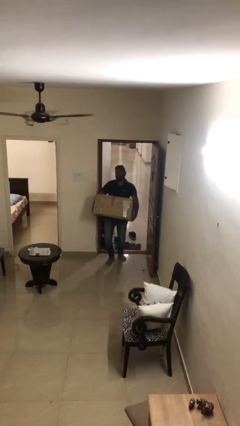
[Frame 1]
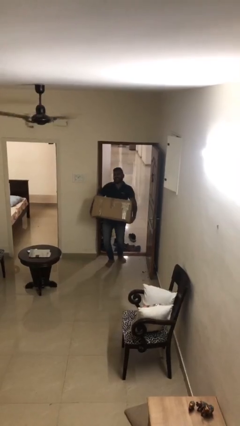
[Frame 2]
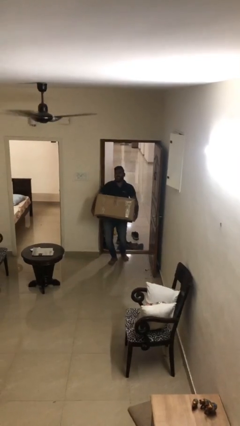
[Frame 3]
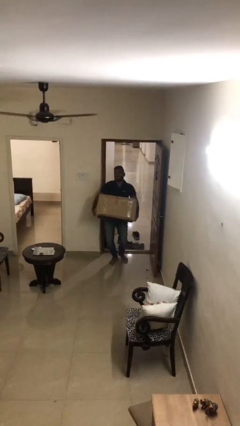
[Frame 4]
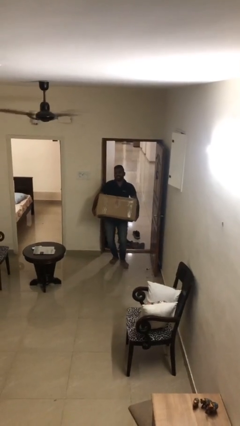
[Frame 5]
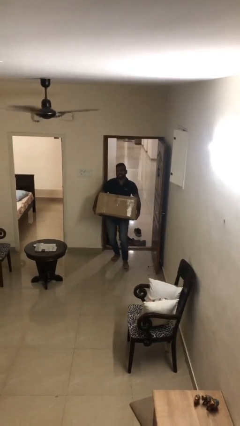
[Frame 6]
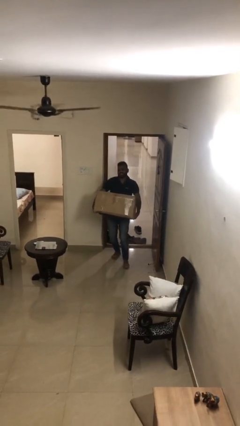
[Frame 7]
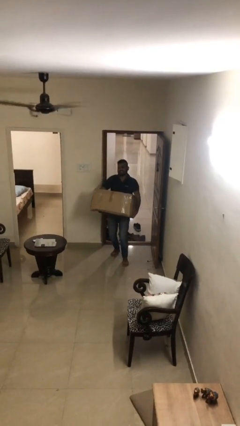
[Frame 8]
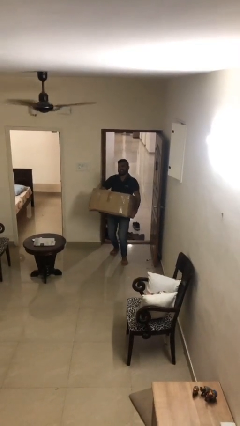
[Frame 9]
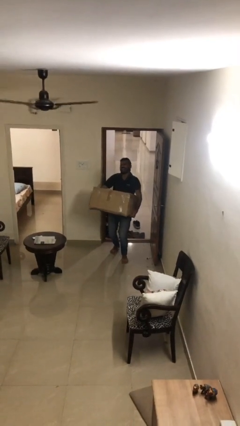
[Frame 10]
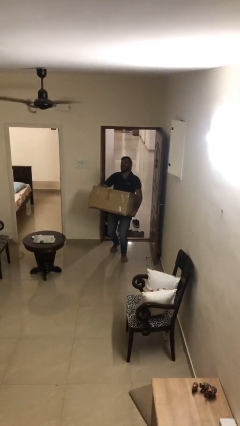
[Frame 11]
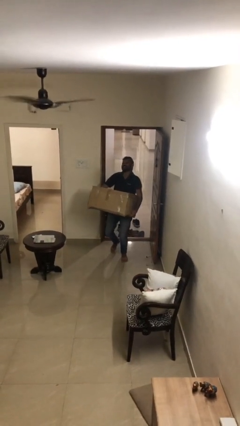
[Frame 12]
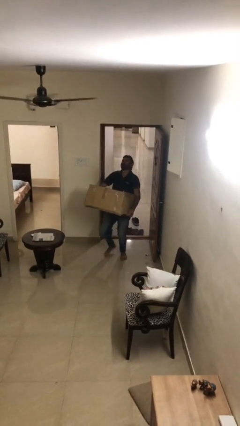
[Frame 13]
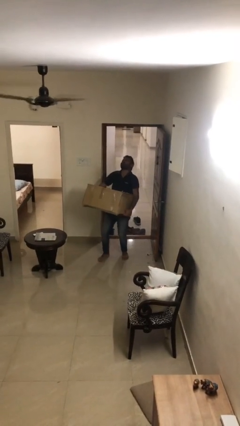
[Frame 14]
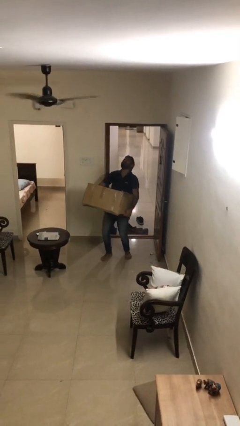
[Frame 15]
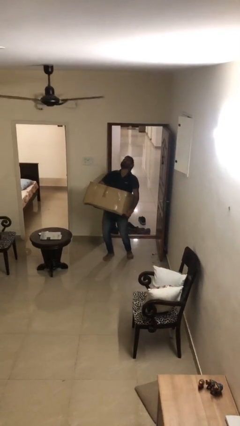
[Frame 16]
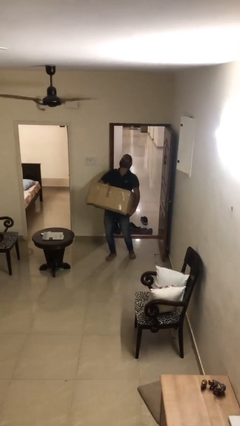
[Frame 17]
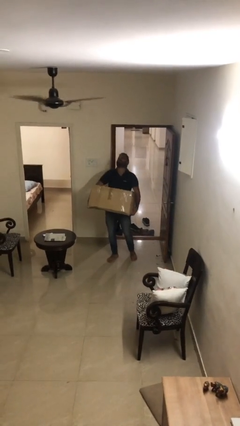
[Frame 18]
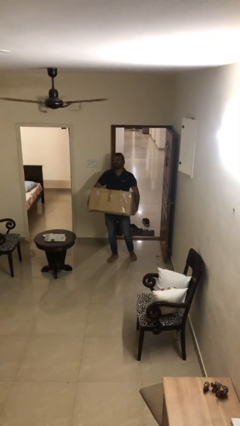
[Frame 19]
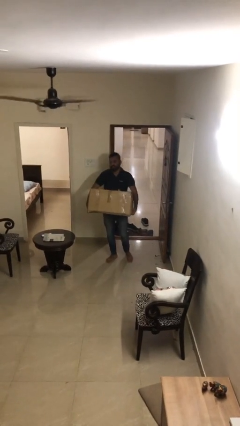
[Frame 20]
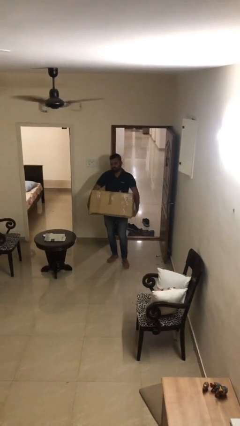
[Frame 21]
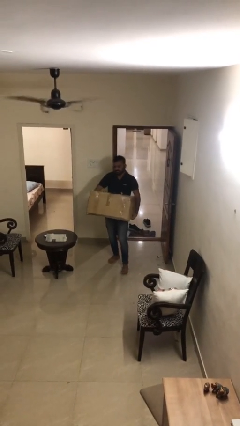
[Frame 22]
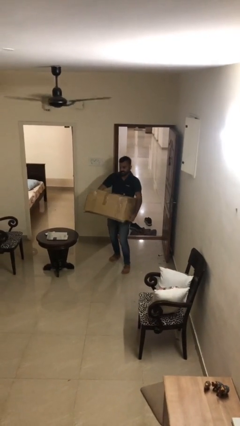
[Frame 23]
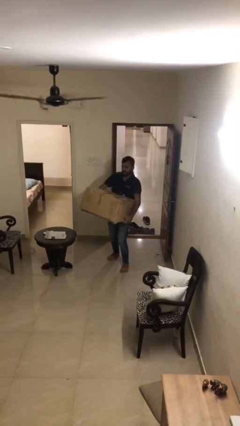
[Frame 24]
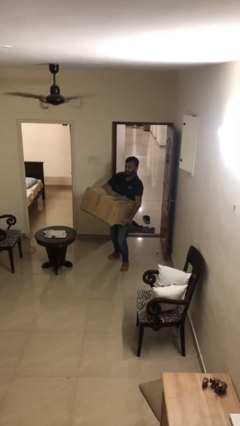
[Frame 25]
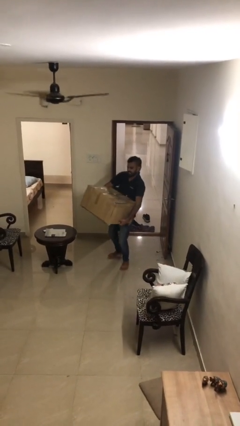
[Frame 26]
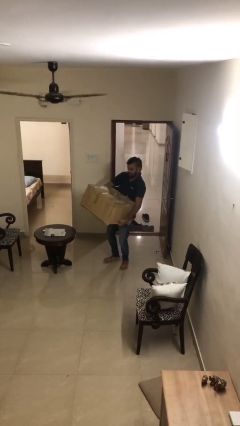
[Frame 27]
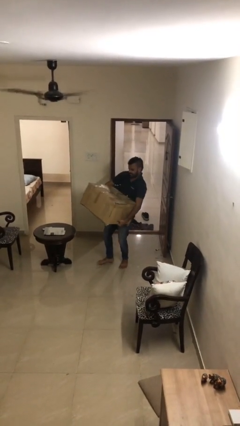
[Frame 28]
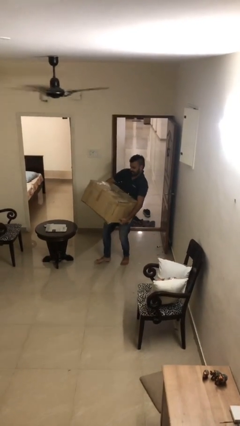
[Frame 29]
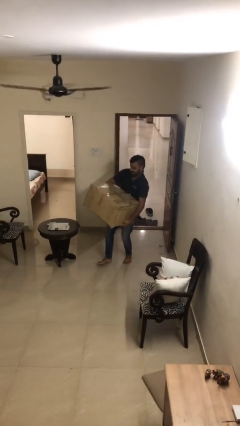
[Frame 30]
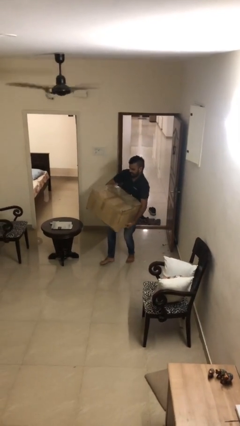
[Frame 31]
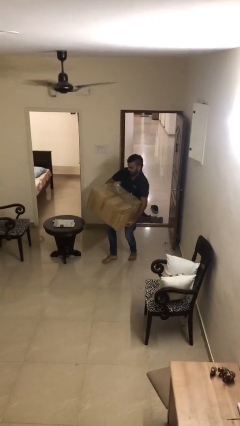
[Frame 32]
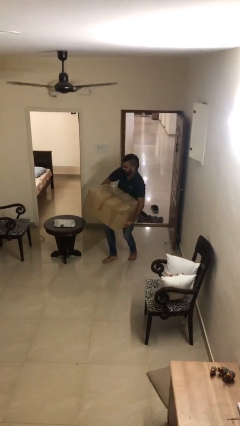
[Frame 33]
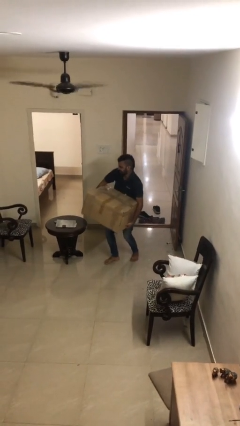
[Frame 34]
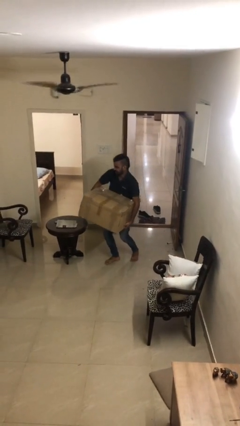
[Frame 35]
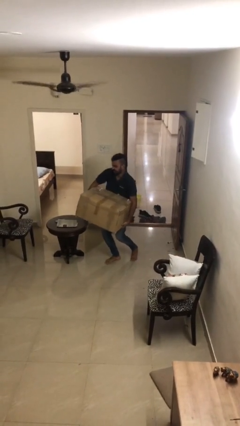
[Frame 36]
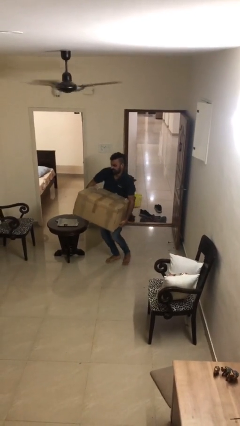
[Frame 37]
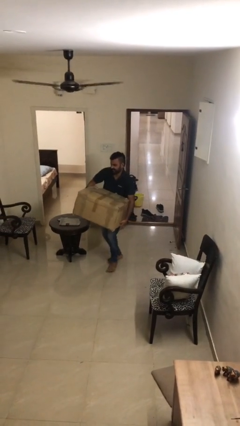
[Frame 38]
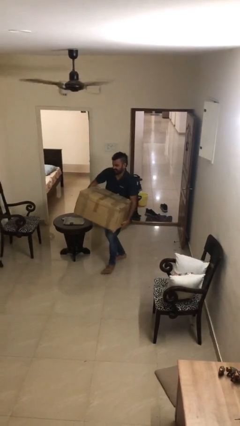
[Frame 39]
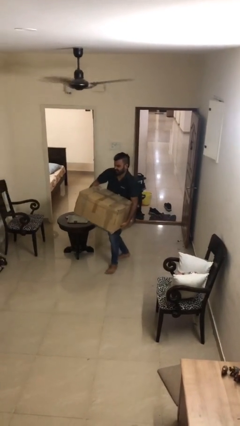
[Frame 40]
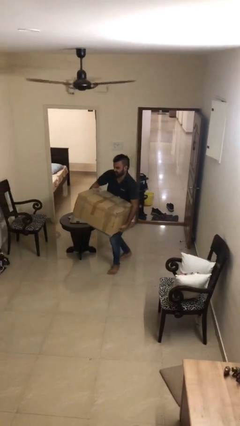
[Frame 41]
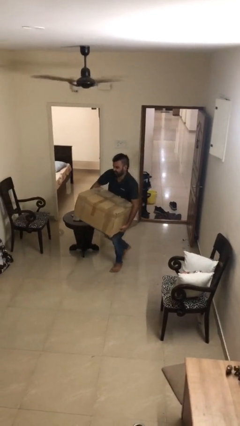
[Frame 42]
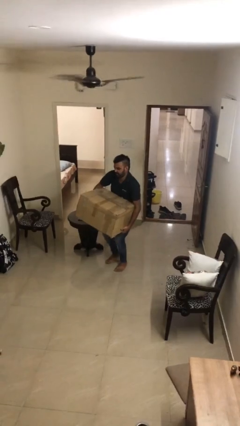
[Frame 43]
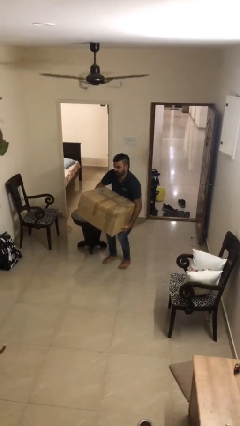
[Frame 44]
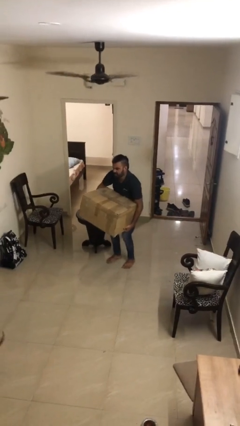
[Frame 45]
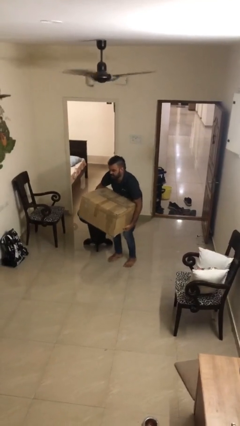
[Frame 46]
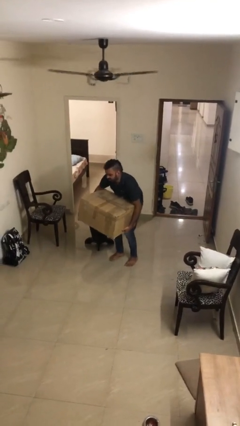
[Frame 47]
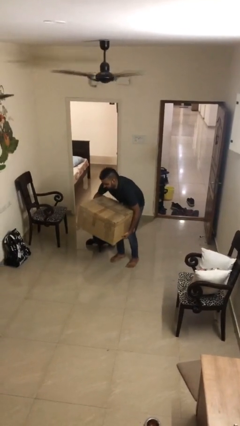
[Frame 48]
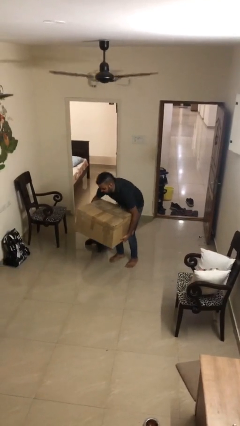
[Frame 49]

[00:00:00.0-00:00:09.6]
person carries heavy object

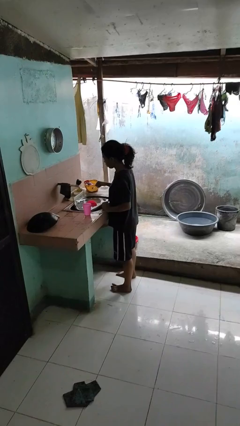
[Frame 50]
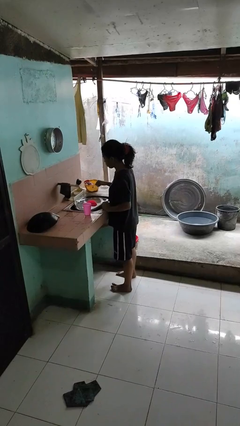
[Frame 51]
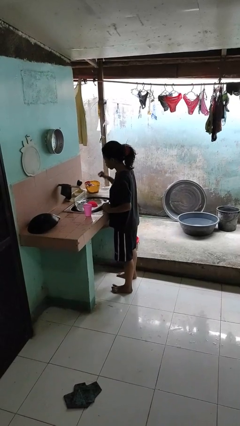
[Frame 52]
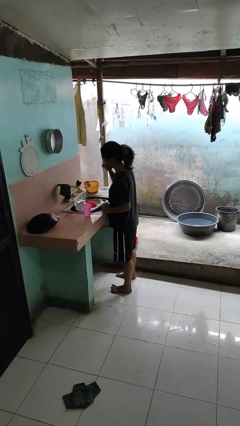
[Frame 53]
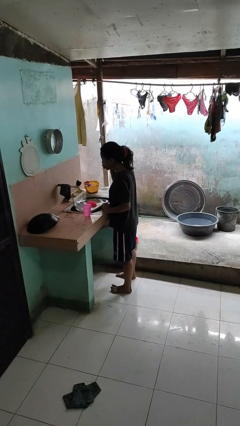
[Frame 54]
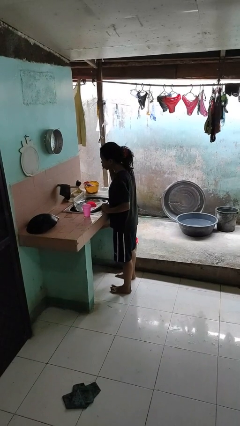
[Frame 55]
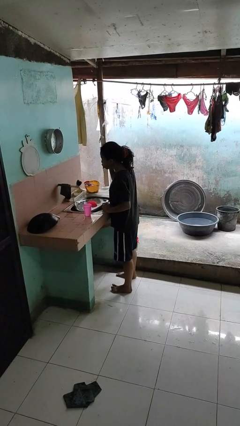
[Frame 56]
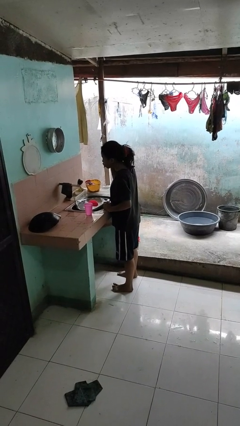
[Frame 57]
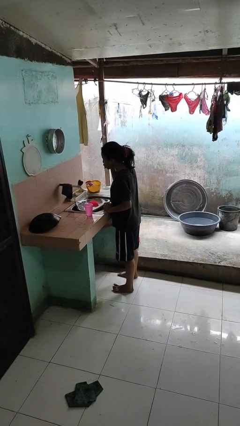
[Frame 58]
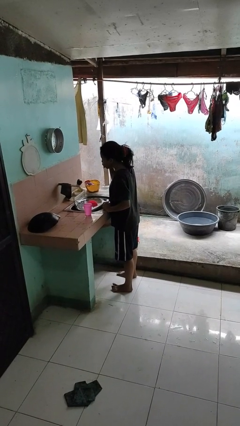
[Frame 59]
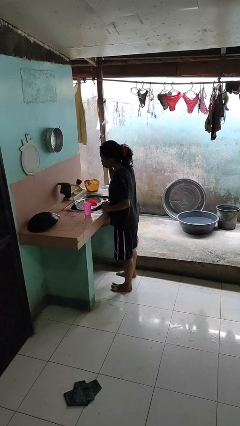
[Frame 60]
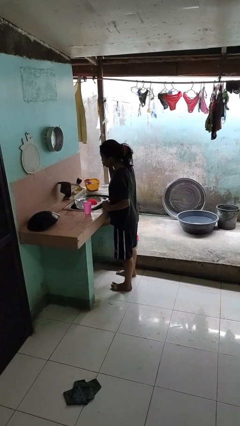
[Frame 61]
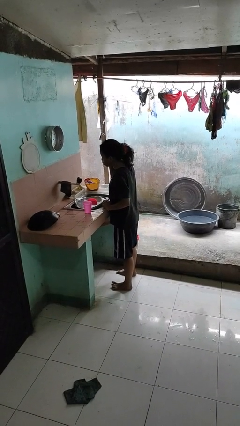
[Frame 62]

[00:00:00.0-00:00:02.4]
person brushes teeth

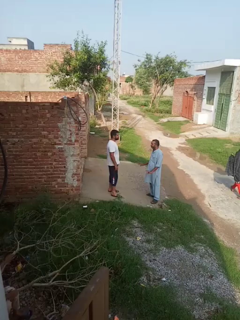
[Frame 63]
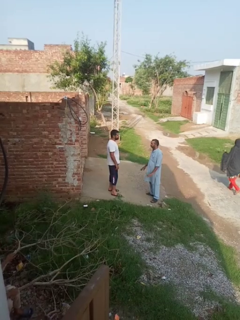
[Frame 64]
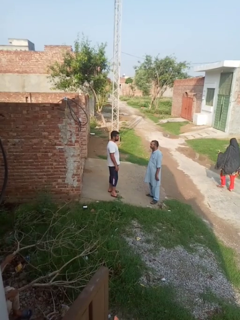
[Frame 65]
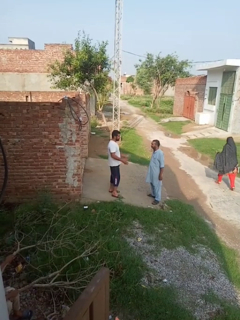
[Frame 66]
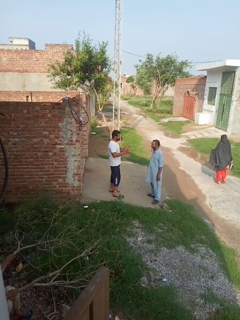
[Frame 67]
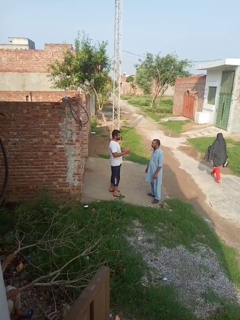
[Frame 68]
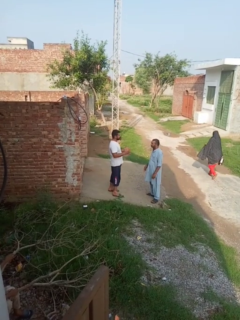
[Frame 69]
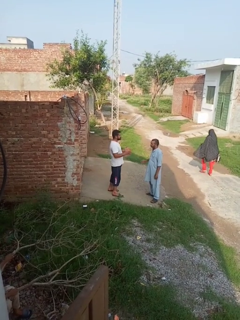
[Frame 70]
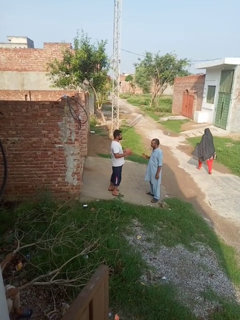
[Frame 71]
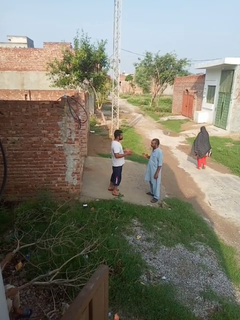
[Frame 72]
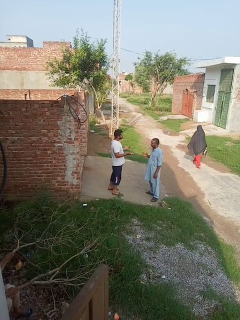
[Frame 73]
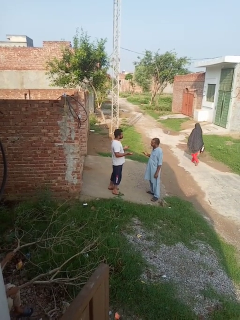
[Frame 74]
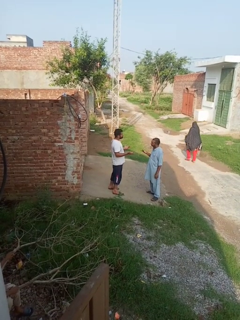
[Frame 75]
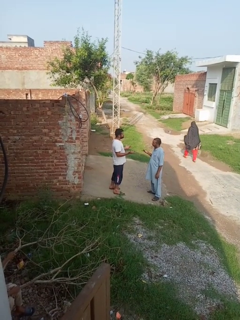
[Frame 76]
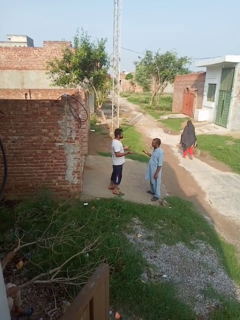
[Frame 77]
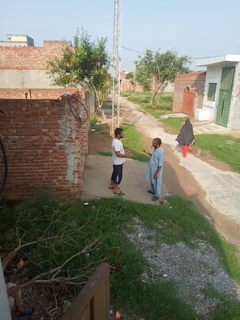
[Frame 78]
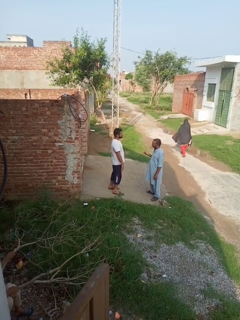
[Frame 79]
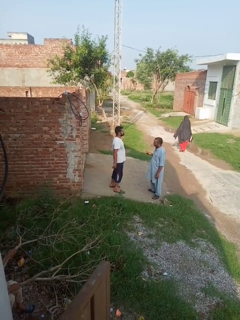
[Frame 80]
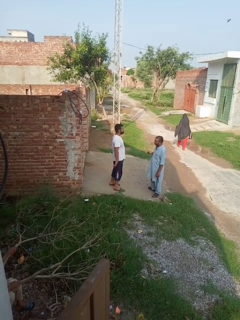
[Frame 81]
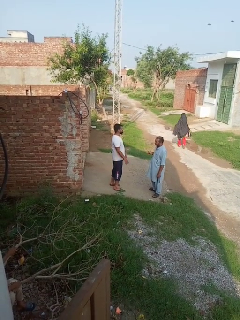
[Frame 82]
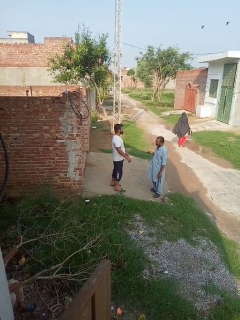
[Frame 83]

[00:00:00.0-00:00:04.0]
person talks to person

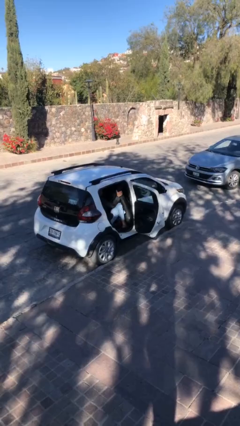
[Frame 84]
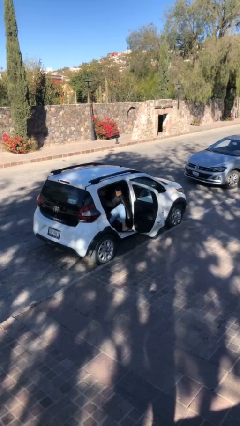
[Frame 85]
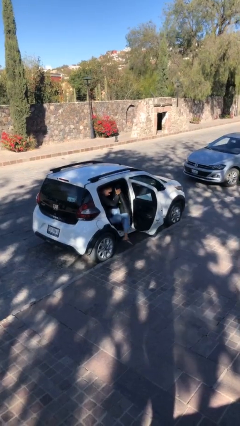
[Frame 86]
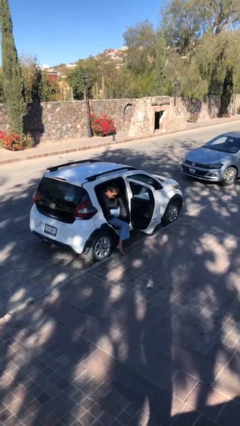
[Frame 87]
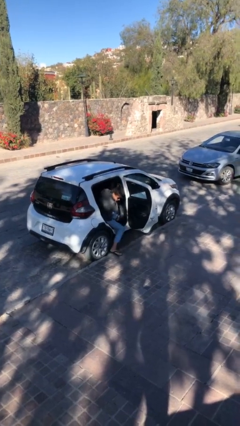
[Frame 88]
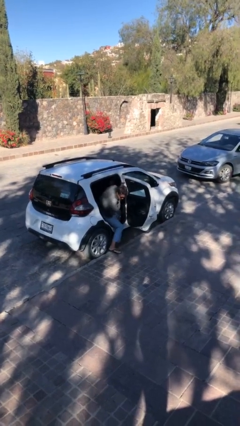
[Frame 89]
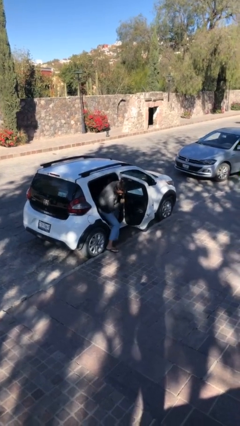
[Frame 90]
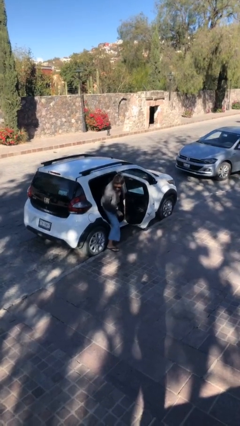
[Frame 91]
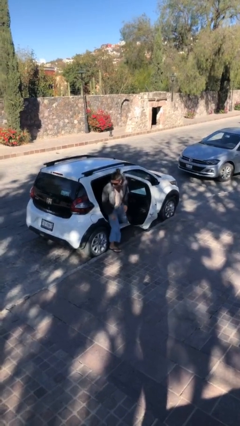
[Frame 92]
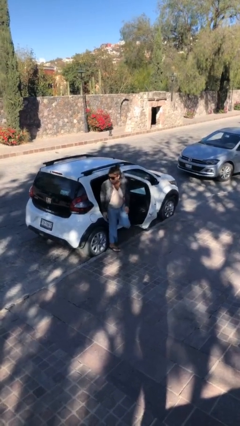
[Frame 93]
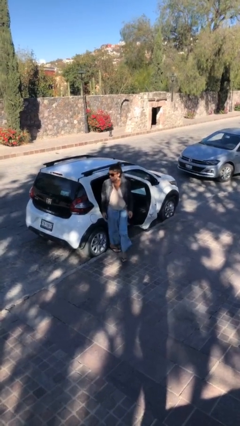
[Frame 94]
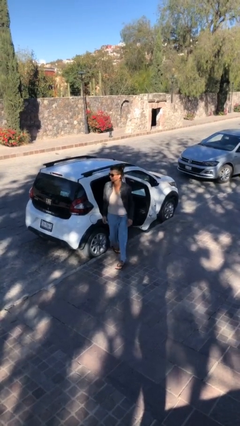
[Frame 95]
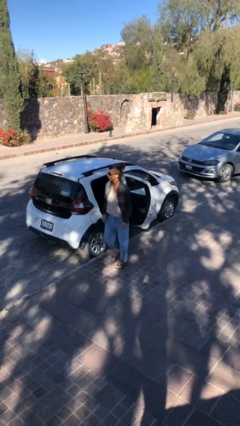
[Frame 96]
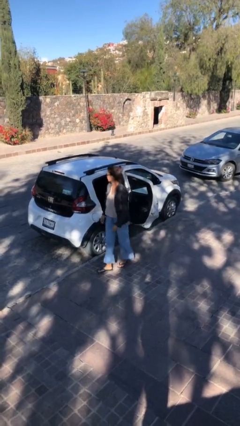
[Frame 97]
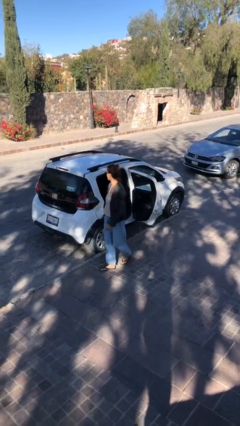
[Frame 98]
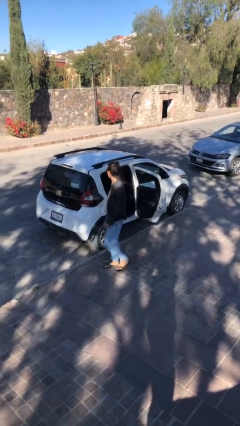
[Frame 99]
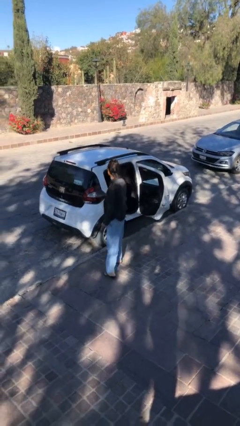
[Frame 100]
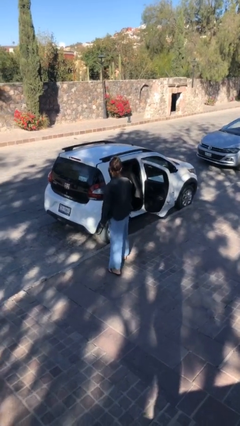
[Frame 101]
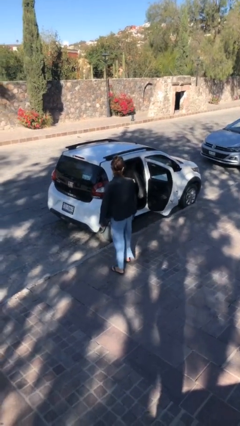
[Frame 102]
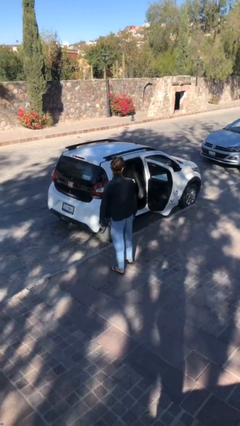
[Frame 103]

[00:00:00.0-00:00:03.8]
person exits car
